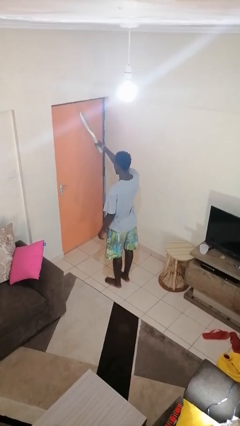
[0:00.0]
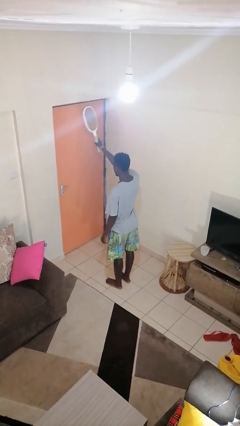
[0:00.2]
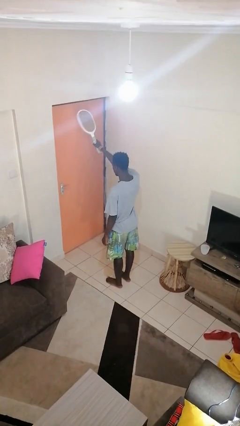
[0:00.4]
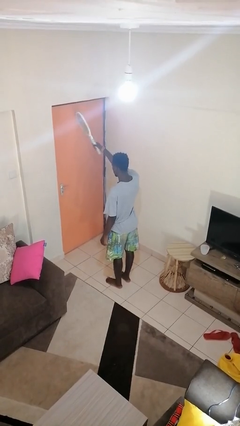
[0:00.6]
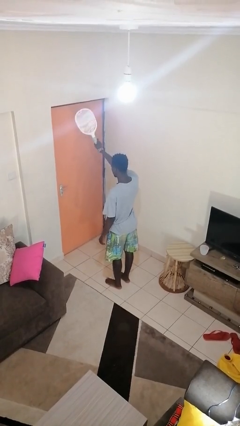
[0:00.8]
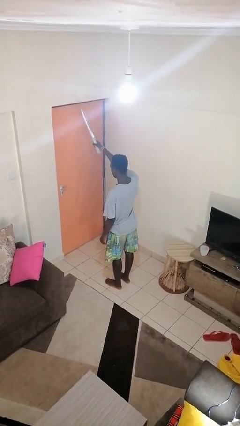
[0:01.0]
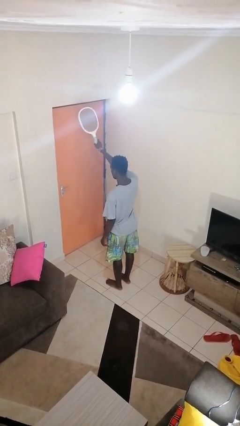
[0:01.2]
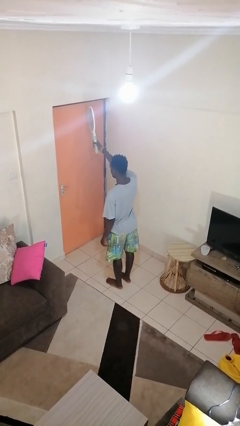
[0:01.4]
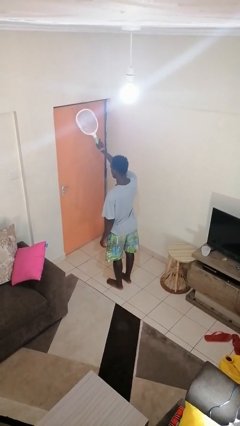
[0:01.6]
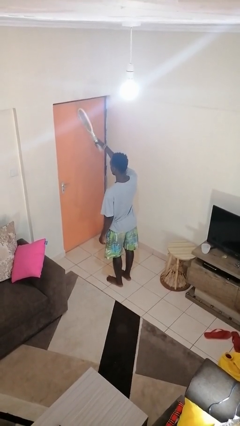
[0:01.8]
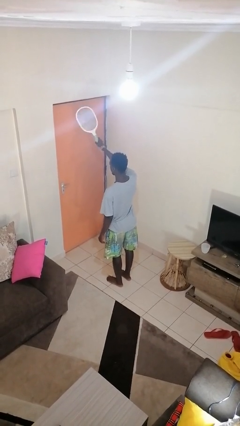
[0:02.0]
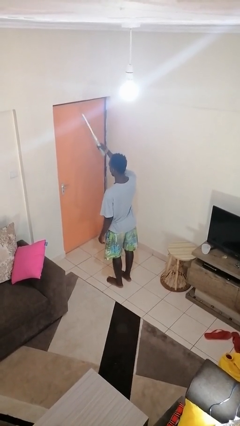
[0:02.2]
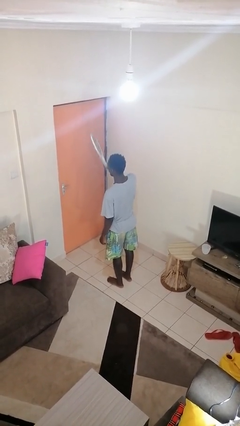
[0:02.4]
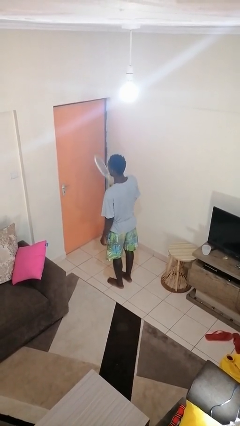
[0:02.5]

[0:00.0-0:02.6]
person holds object above head

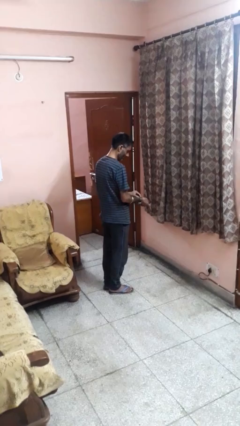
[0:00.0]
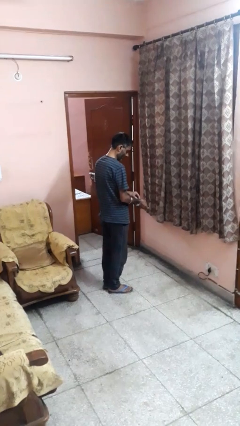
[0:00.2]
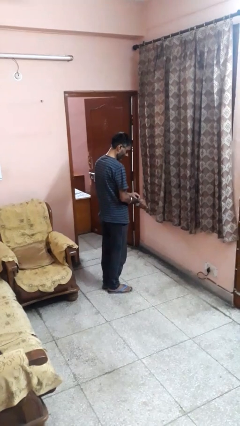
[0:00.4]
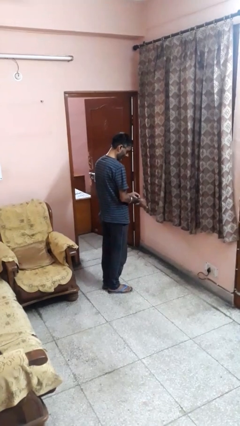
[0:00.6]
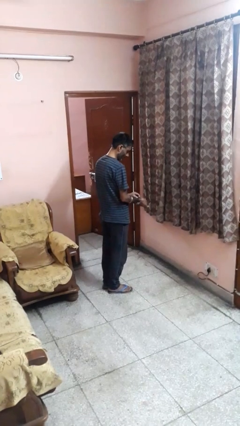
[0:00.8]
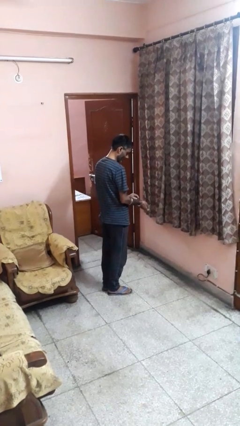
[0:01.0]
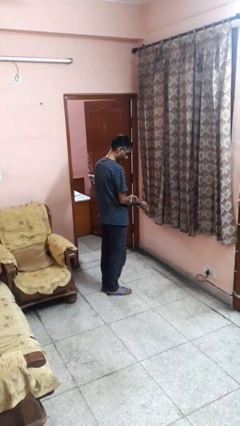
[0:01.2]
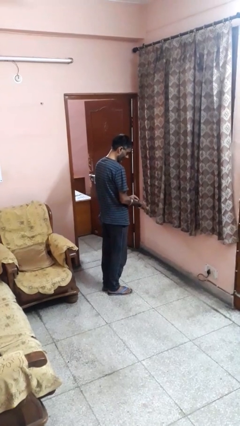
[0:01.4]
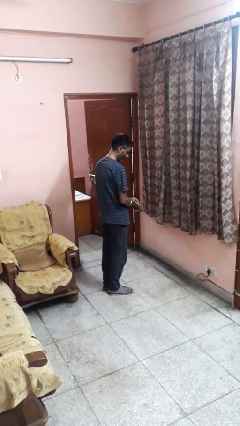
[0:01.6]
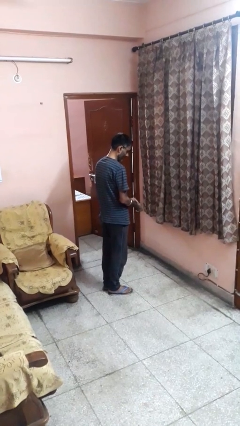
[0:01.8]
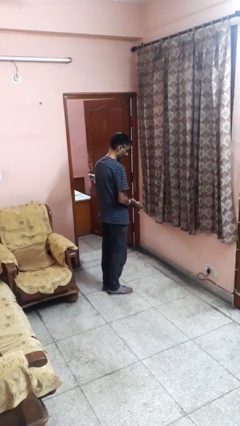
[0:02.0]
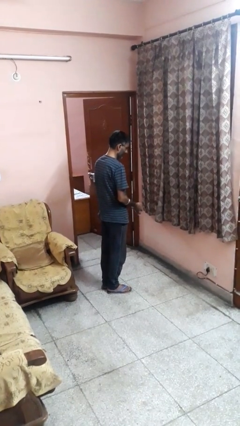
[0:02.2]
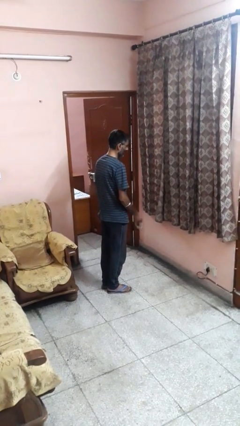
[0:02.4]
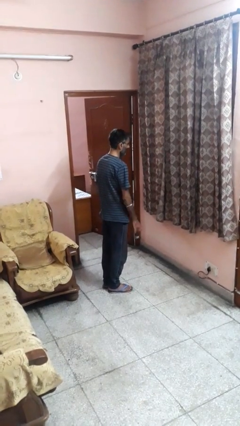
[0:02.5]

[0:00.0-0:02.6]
person takes off wristwatch

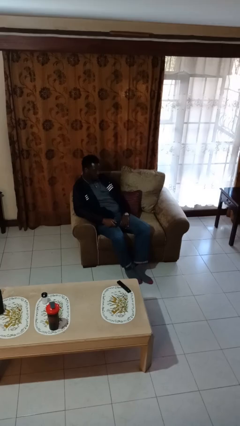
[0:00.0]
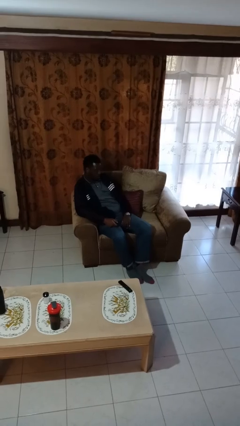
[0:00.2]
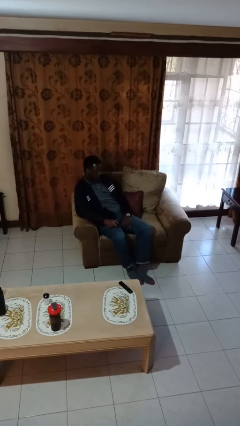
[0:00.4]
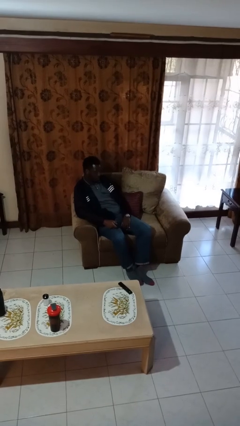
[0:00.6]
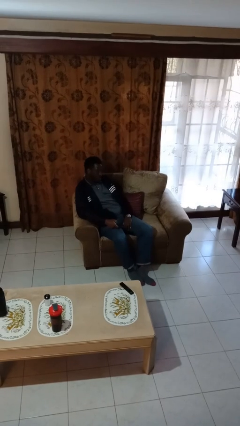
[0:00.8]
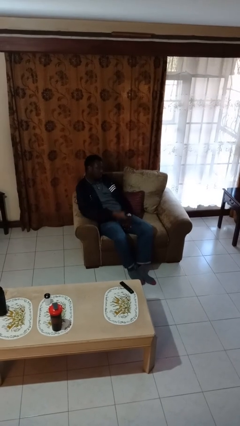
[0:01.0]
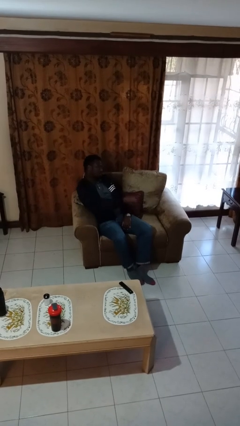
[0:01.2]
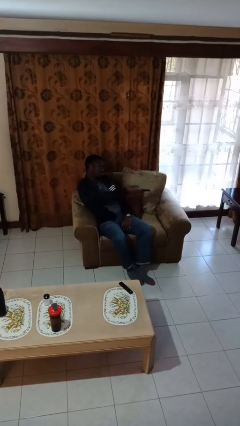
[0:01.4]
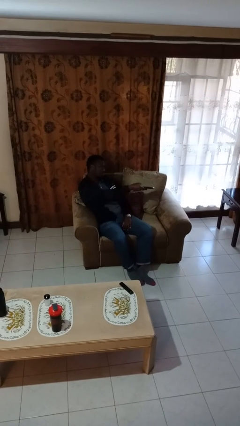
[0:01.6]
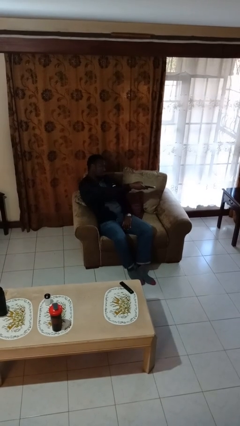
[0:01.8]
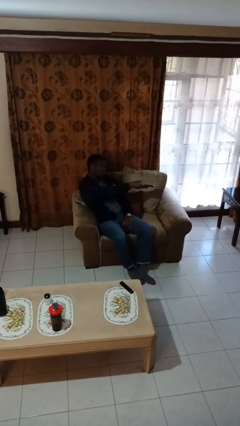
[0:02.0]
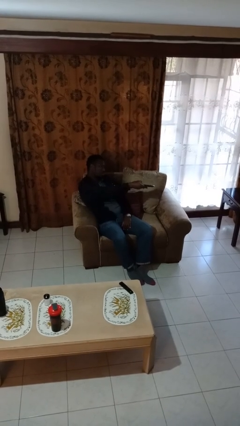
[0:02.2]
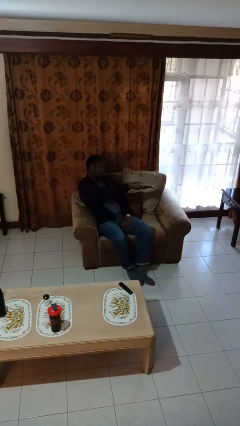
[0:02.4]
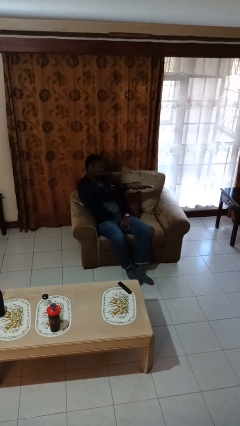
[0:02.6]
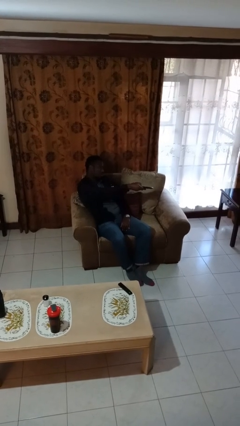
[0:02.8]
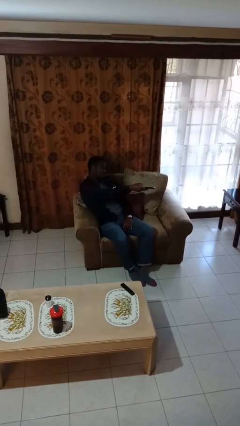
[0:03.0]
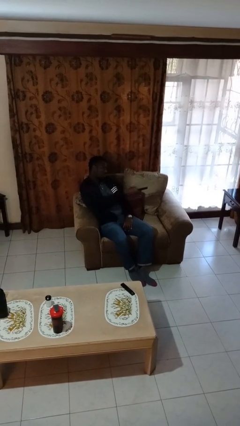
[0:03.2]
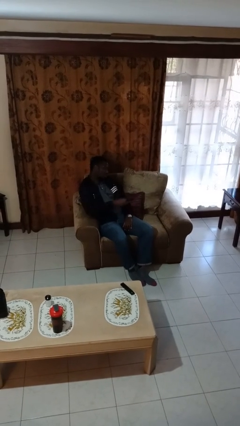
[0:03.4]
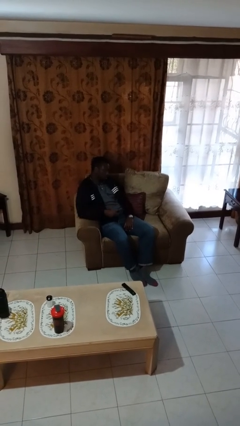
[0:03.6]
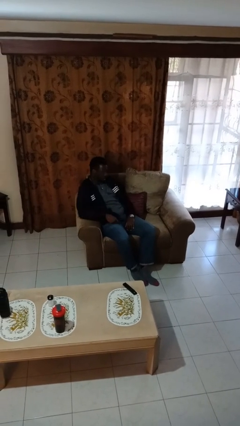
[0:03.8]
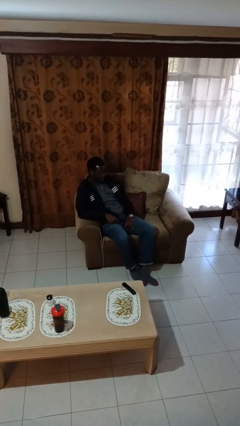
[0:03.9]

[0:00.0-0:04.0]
person uses television remote

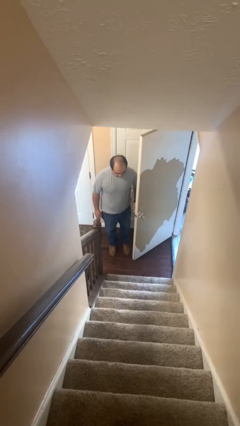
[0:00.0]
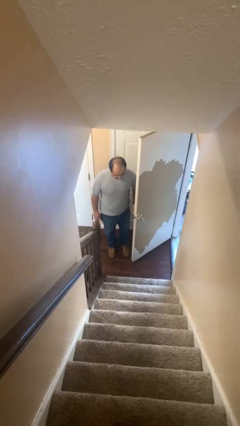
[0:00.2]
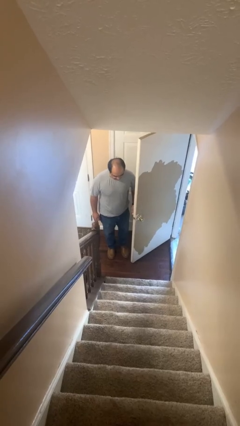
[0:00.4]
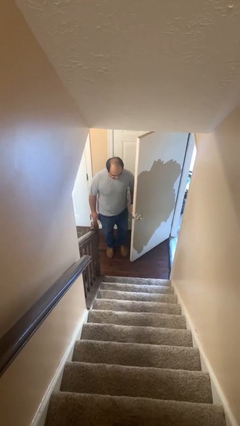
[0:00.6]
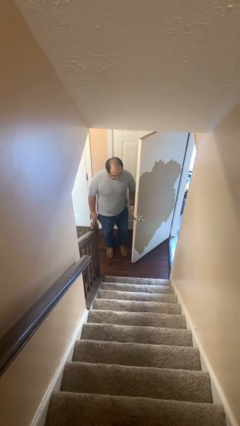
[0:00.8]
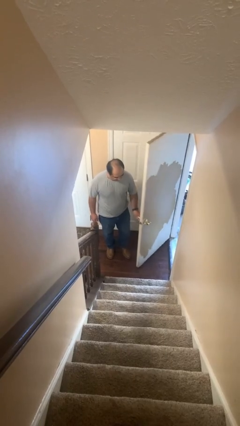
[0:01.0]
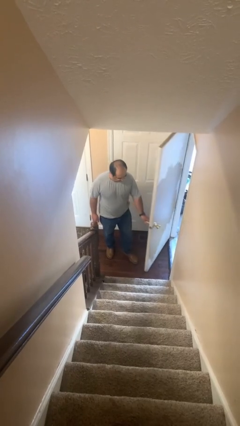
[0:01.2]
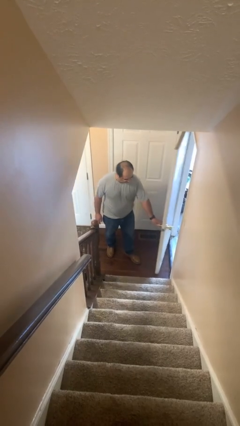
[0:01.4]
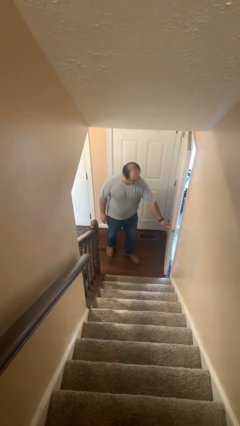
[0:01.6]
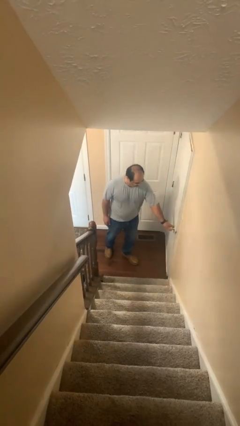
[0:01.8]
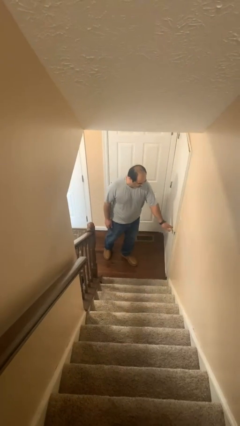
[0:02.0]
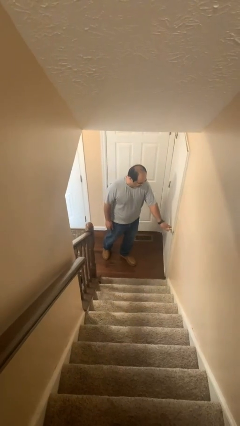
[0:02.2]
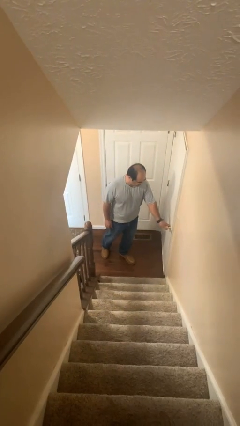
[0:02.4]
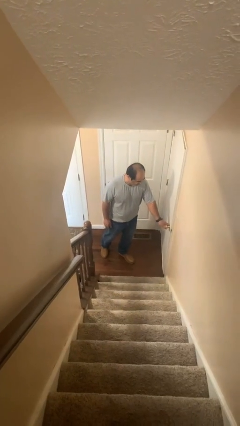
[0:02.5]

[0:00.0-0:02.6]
person closes facility door

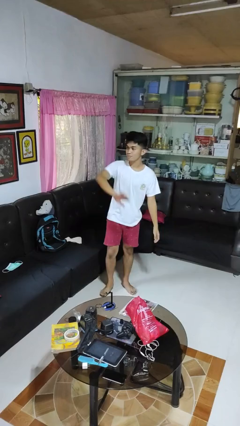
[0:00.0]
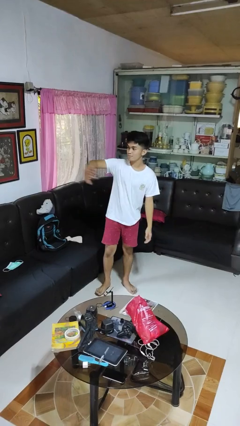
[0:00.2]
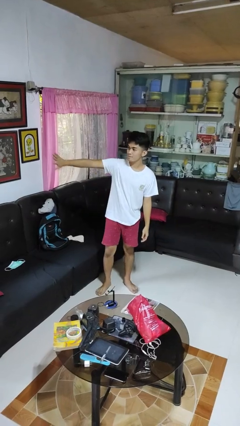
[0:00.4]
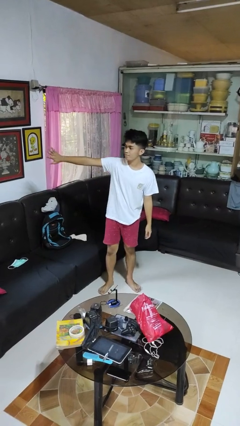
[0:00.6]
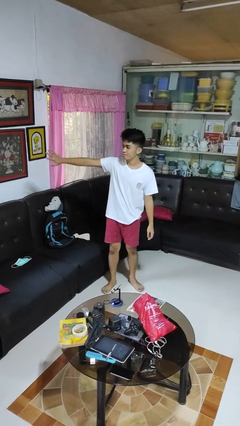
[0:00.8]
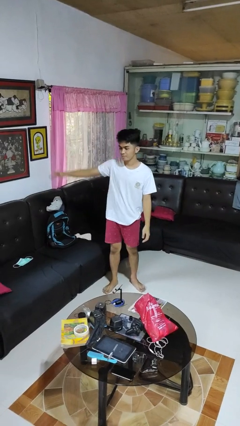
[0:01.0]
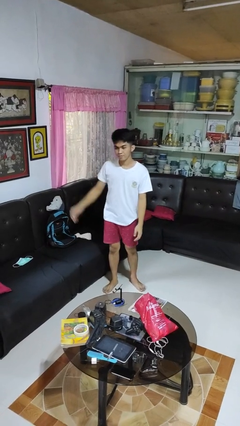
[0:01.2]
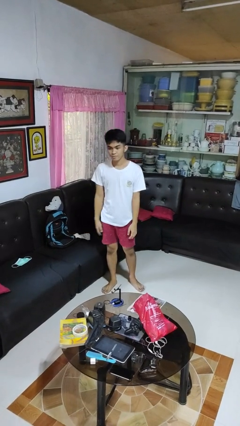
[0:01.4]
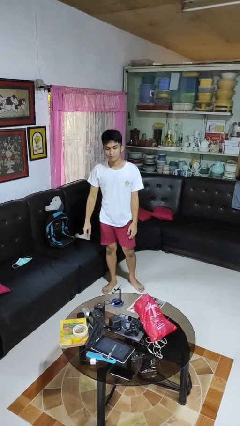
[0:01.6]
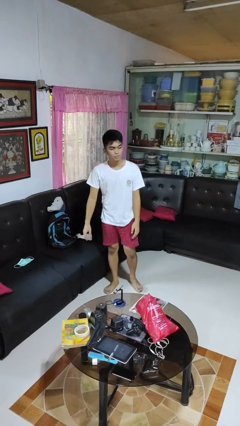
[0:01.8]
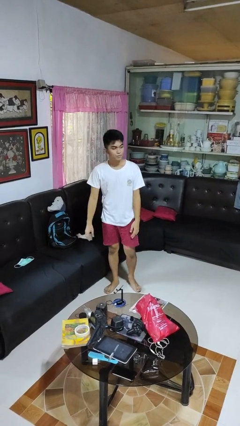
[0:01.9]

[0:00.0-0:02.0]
person gestures swipe right

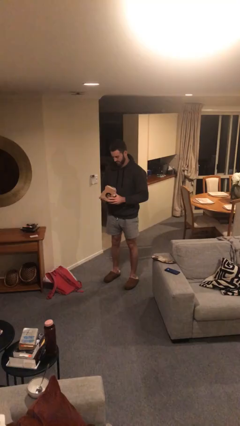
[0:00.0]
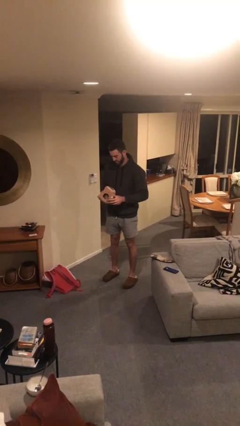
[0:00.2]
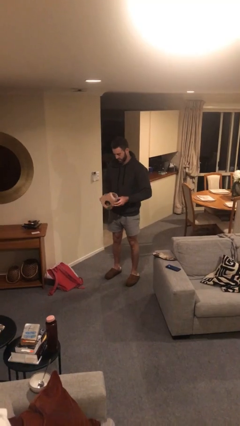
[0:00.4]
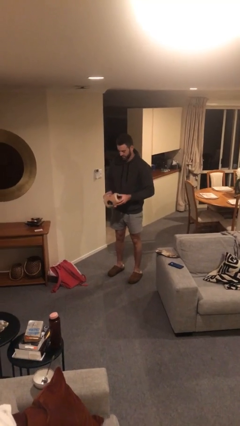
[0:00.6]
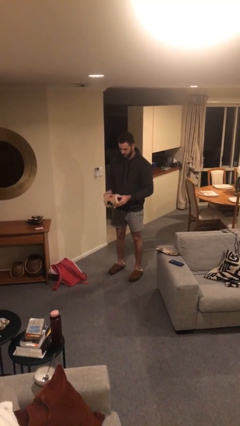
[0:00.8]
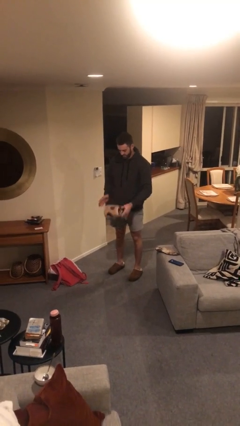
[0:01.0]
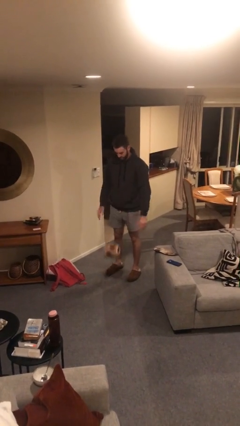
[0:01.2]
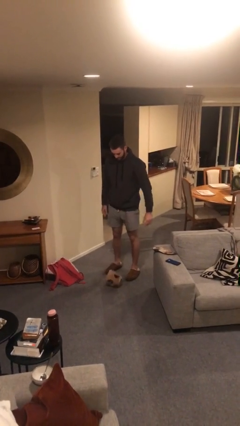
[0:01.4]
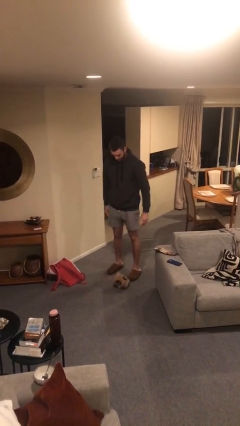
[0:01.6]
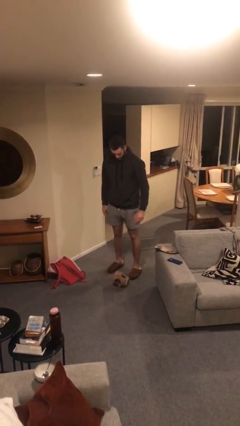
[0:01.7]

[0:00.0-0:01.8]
person drops object

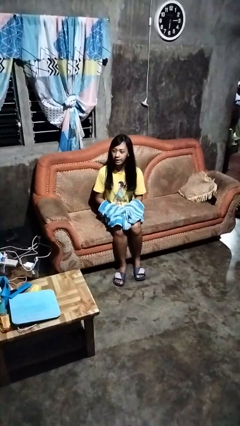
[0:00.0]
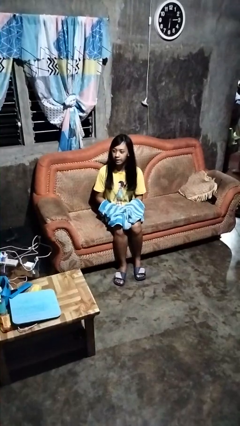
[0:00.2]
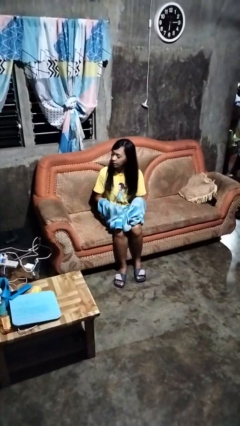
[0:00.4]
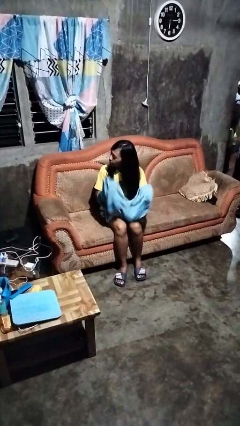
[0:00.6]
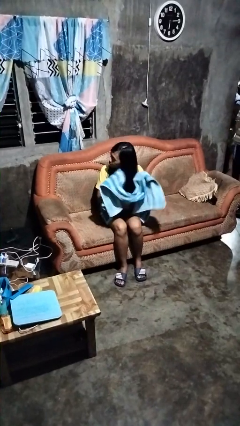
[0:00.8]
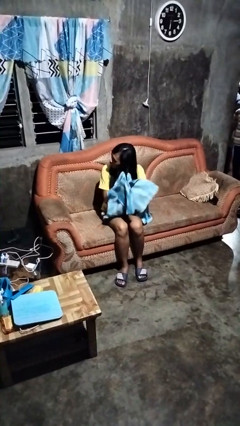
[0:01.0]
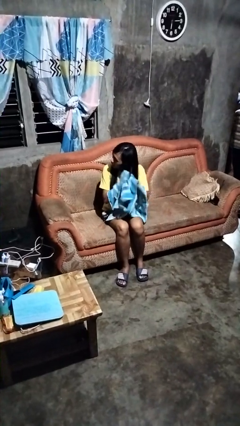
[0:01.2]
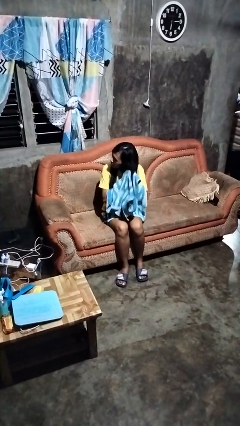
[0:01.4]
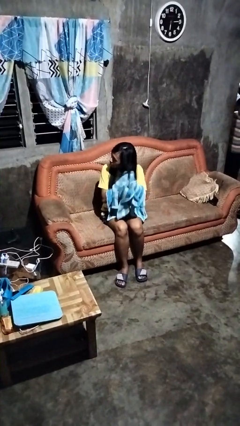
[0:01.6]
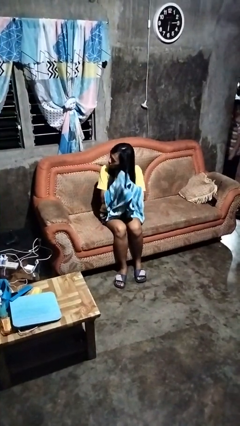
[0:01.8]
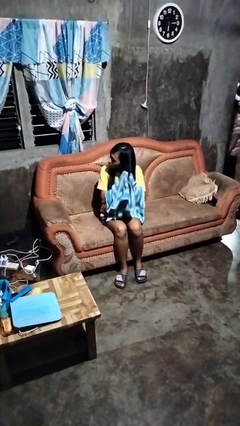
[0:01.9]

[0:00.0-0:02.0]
person dries hair with towel
